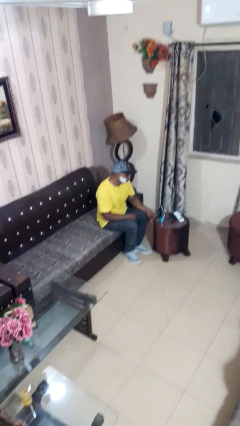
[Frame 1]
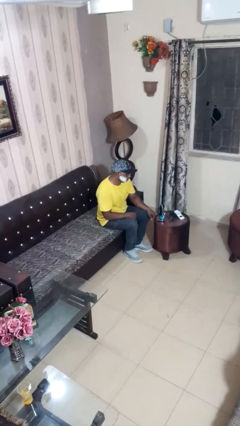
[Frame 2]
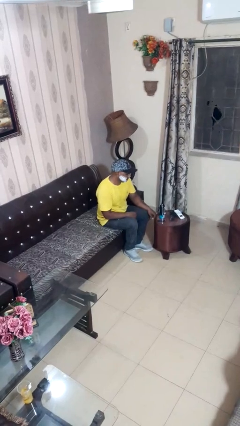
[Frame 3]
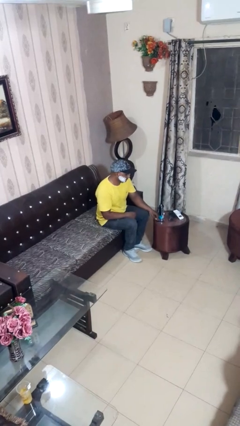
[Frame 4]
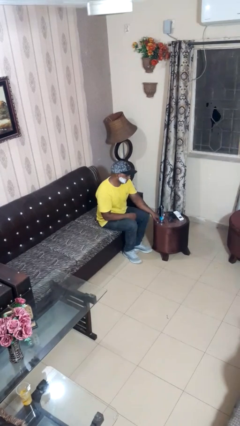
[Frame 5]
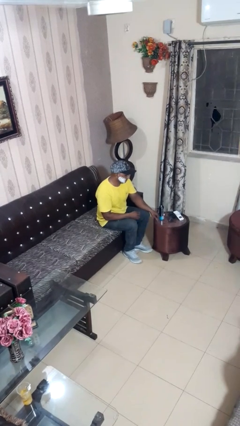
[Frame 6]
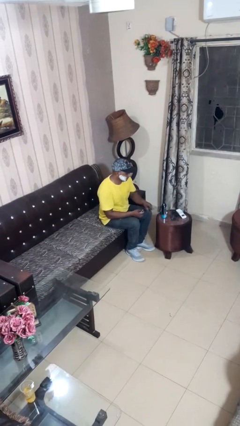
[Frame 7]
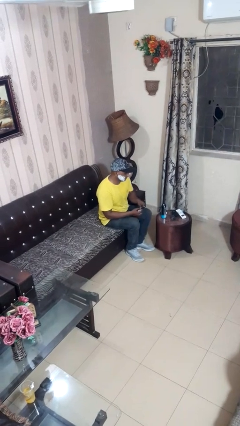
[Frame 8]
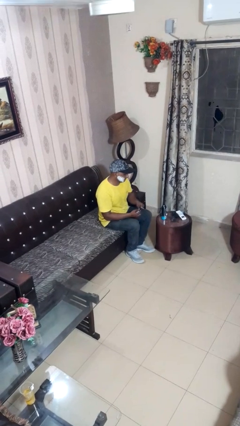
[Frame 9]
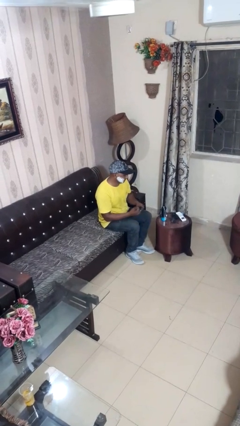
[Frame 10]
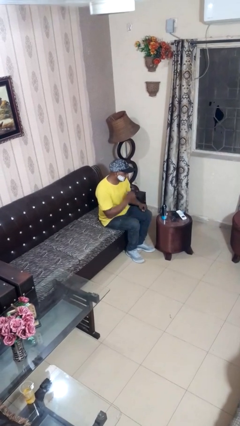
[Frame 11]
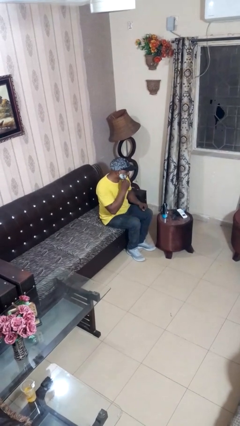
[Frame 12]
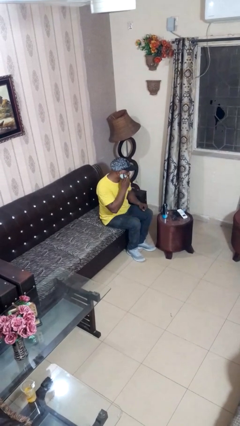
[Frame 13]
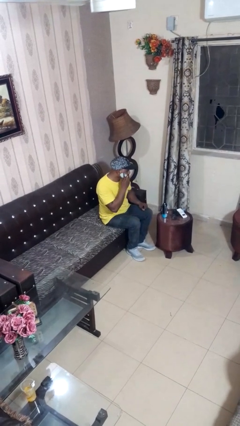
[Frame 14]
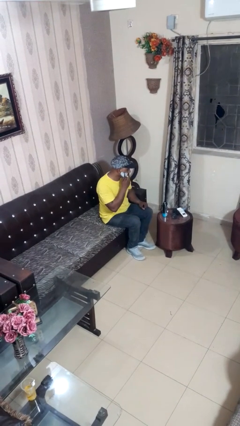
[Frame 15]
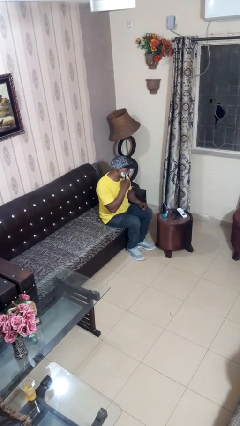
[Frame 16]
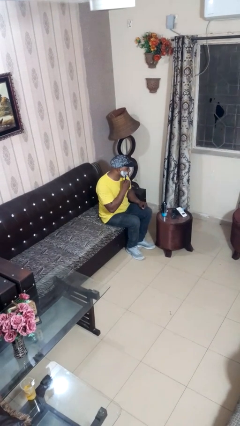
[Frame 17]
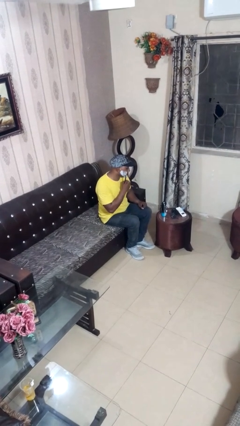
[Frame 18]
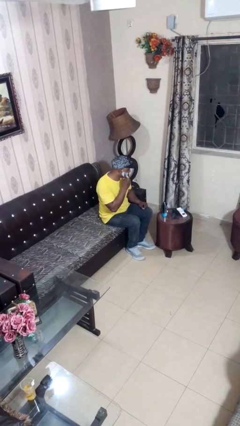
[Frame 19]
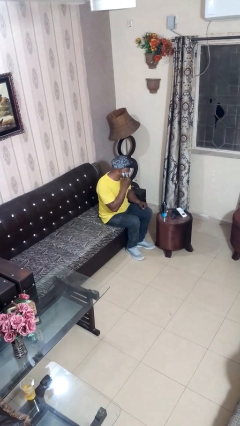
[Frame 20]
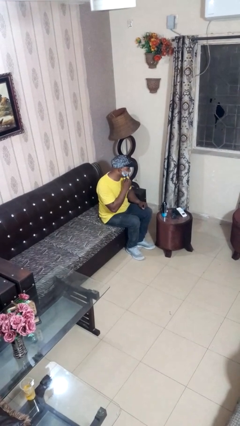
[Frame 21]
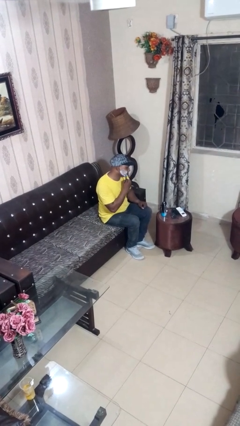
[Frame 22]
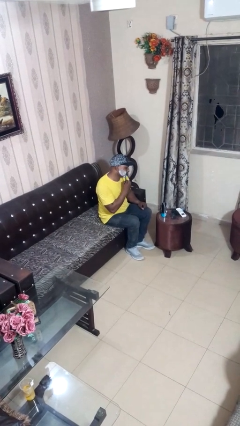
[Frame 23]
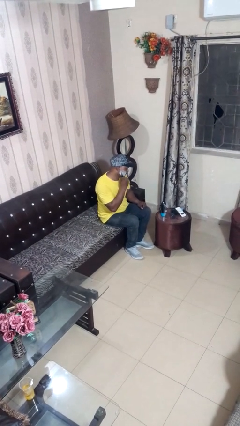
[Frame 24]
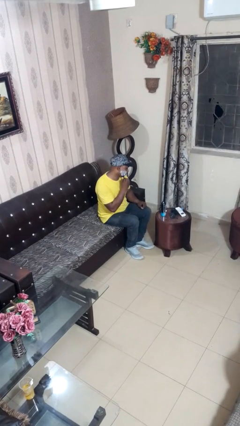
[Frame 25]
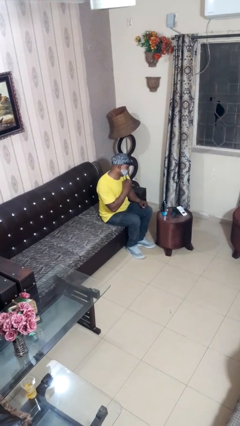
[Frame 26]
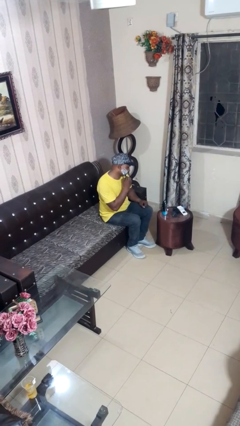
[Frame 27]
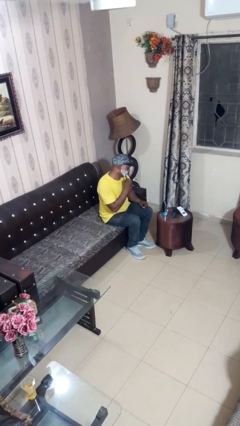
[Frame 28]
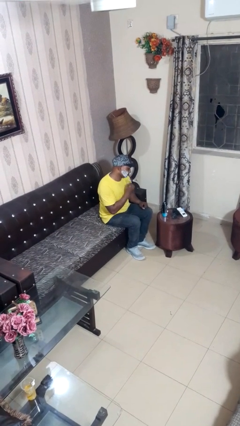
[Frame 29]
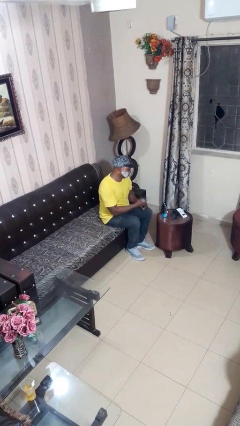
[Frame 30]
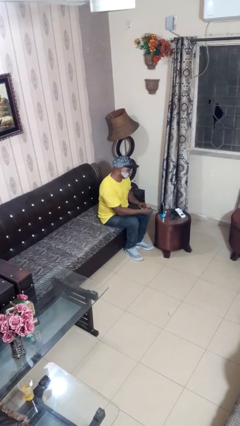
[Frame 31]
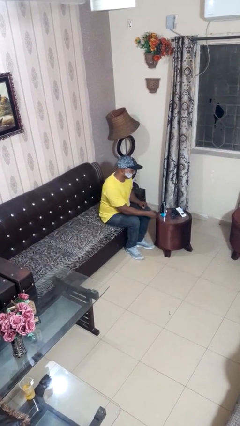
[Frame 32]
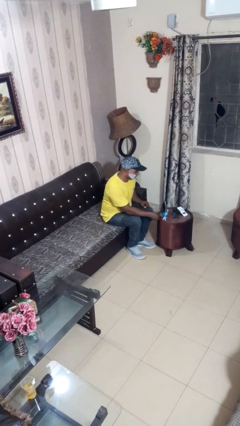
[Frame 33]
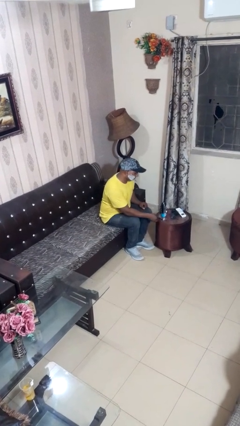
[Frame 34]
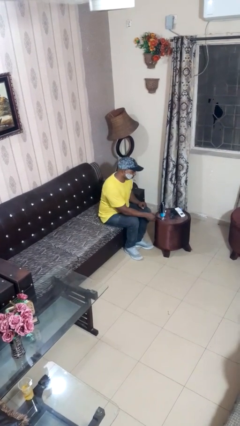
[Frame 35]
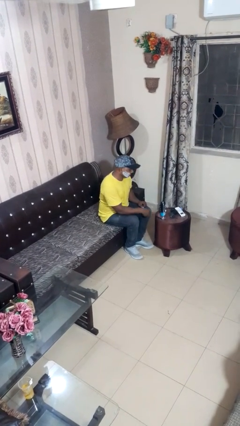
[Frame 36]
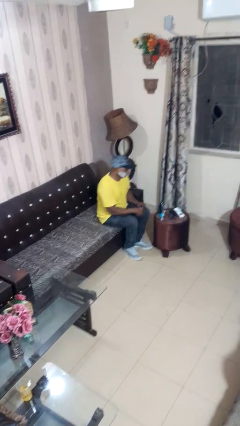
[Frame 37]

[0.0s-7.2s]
person shaves face

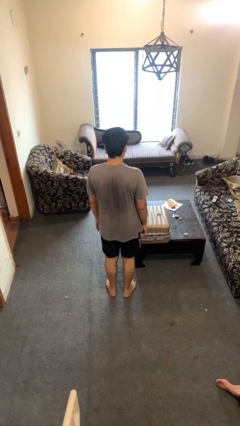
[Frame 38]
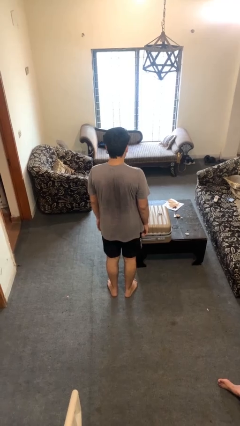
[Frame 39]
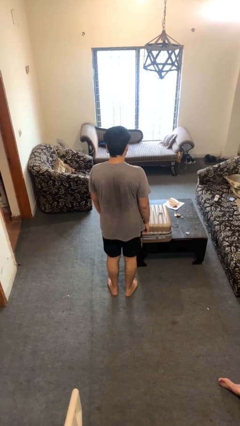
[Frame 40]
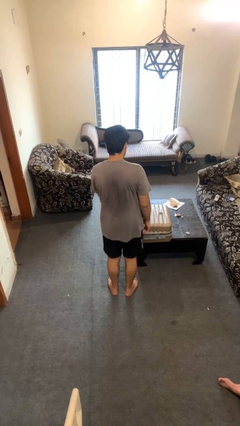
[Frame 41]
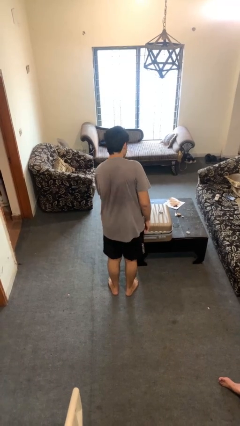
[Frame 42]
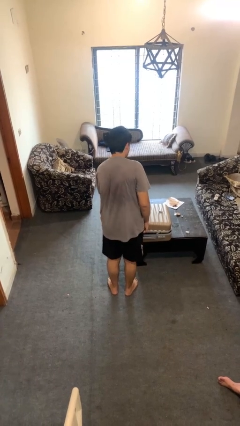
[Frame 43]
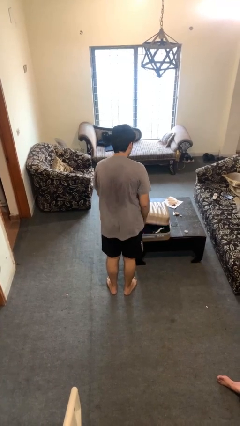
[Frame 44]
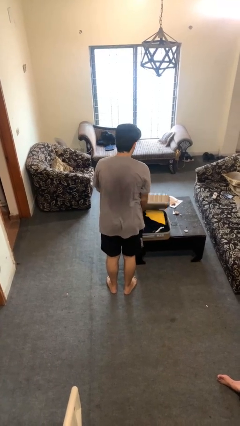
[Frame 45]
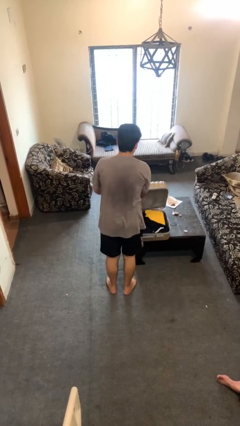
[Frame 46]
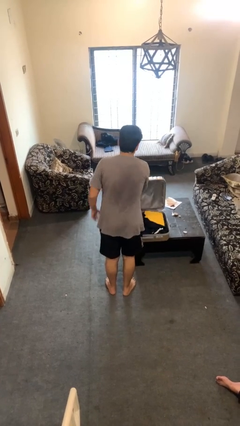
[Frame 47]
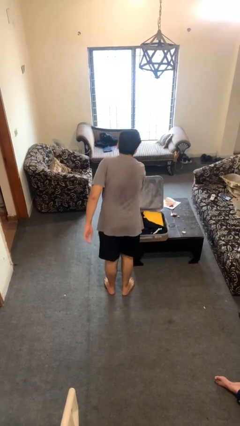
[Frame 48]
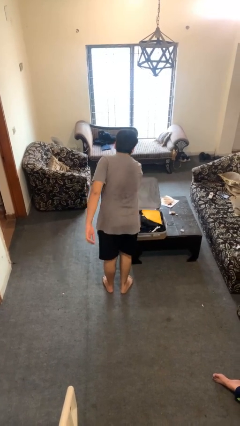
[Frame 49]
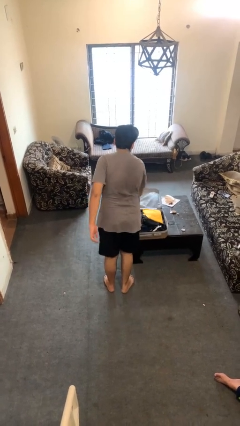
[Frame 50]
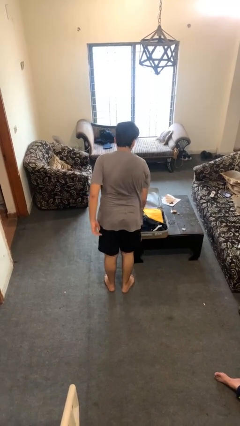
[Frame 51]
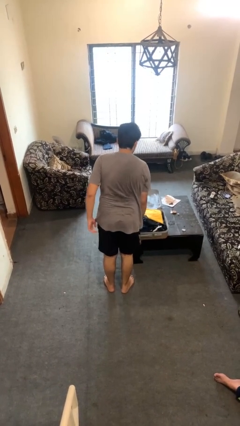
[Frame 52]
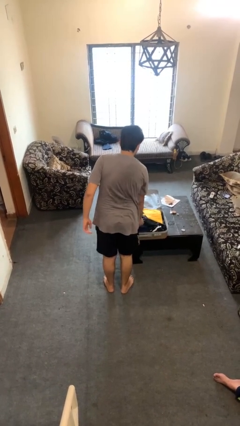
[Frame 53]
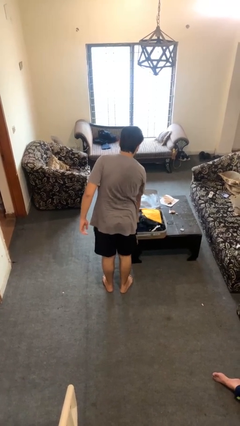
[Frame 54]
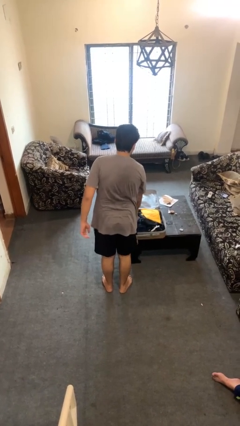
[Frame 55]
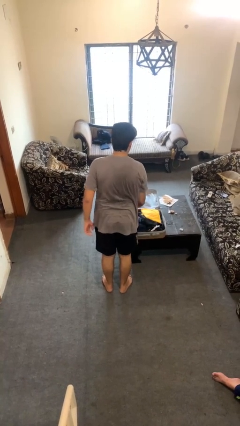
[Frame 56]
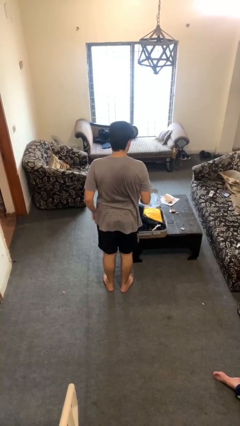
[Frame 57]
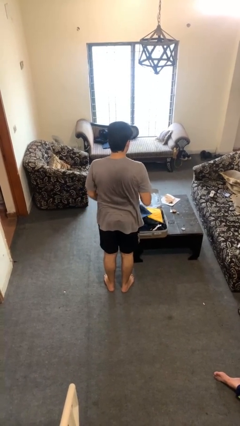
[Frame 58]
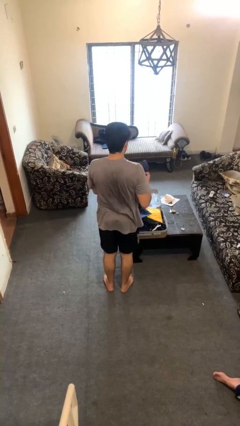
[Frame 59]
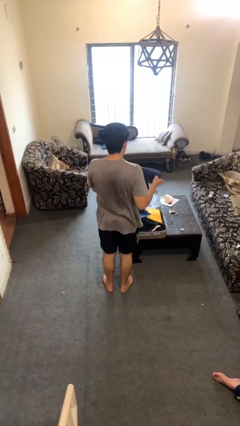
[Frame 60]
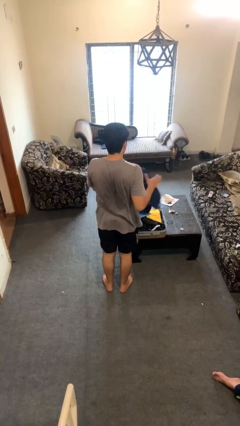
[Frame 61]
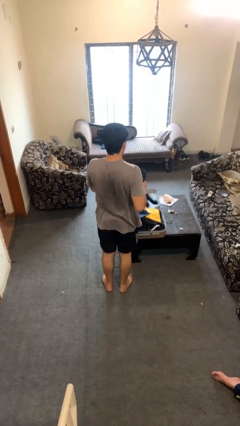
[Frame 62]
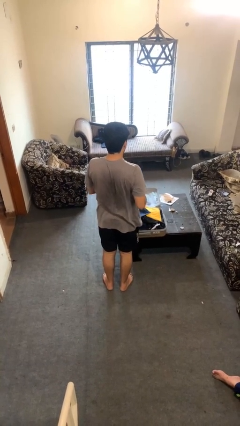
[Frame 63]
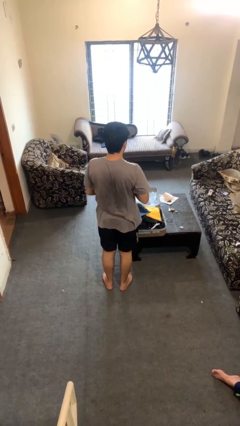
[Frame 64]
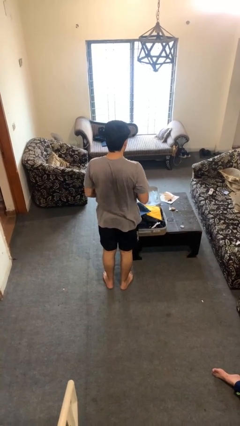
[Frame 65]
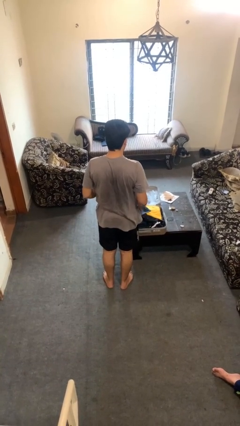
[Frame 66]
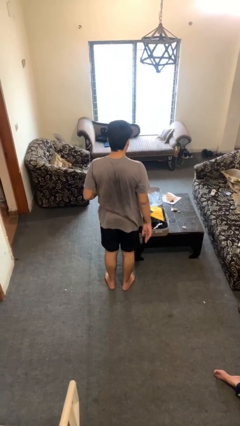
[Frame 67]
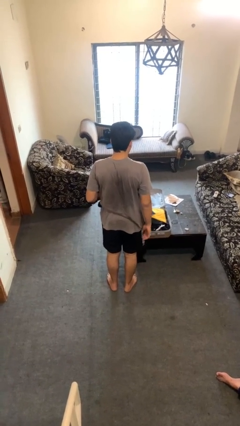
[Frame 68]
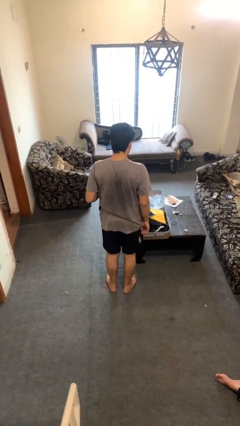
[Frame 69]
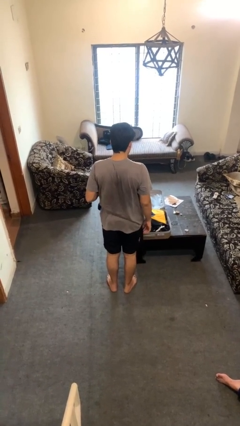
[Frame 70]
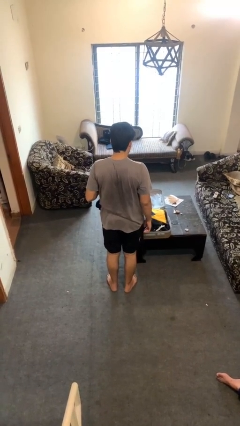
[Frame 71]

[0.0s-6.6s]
person unloads clothes from suitcase

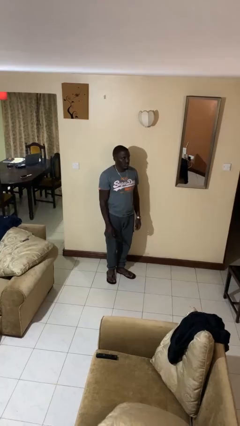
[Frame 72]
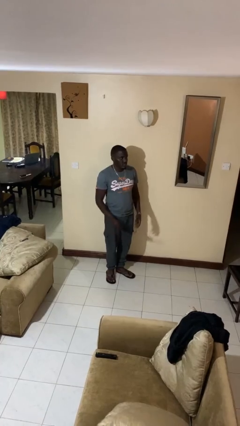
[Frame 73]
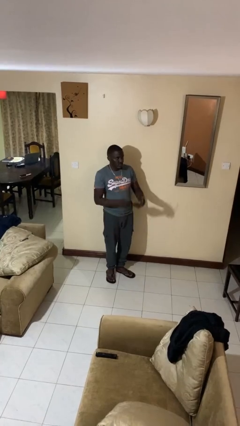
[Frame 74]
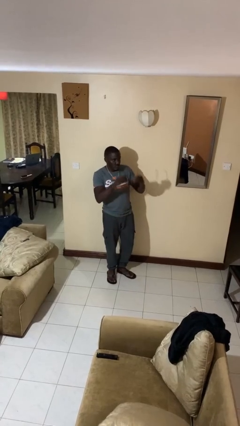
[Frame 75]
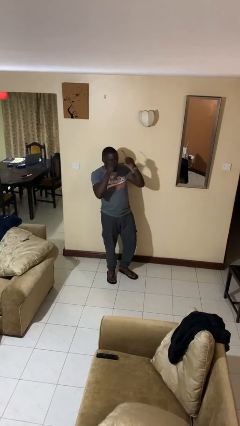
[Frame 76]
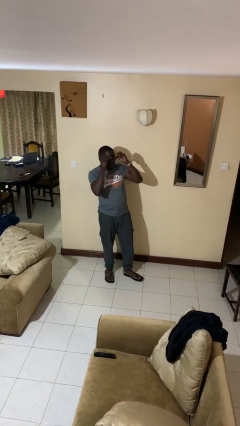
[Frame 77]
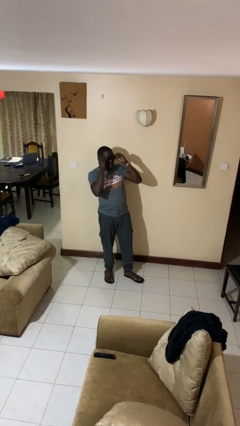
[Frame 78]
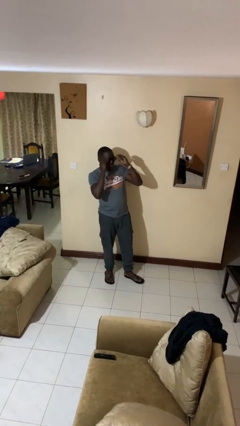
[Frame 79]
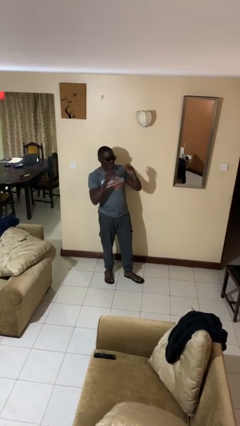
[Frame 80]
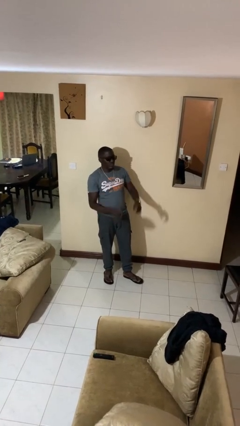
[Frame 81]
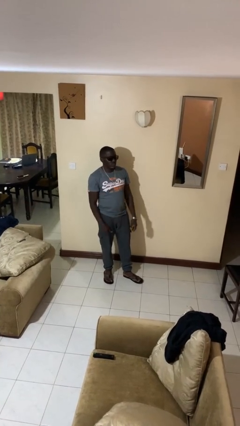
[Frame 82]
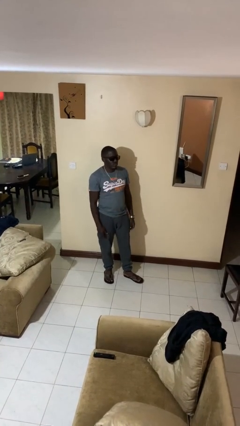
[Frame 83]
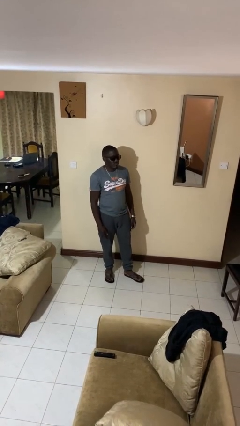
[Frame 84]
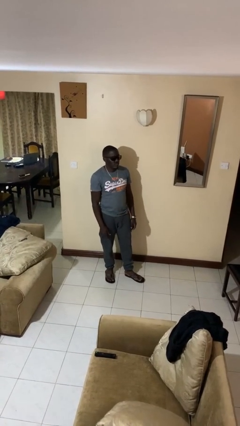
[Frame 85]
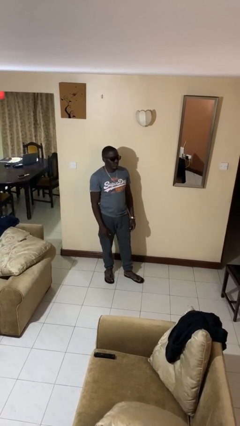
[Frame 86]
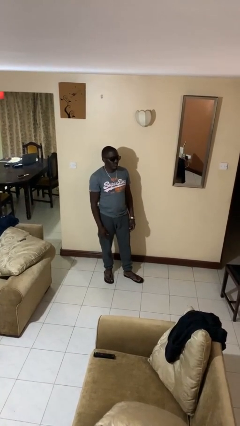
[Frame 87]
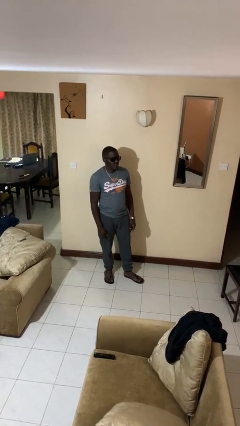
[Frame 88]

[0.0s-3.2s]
person puts on sunglasses

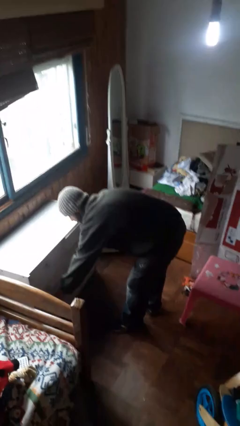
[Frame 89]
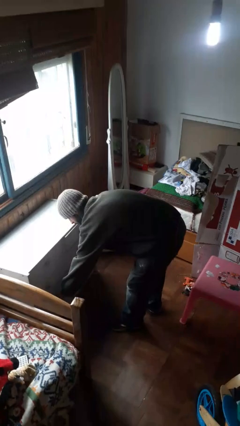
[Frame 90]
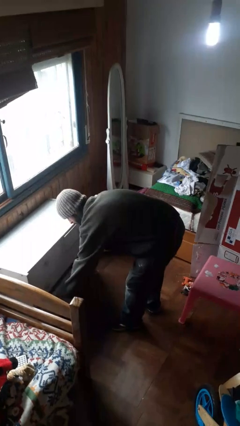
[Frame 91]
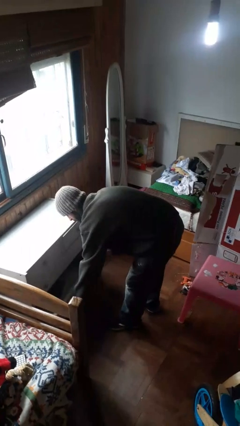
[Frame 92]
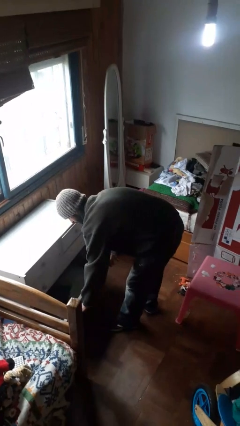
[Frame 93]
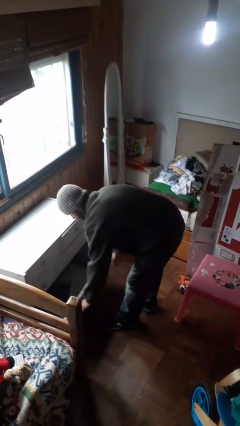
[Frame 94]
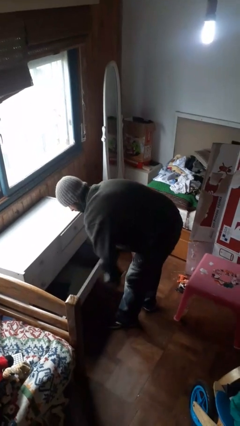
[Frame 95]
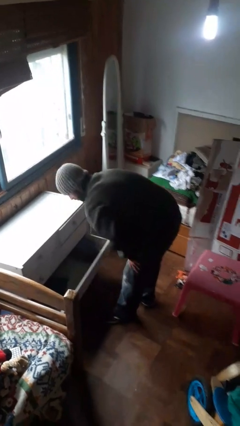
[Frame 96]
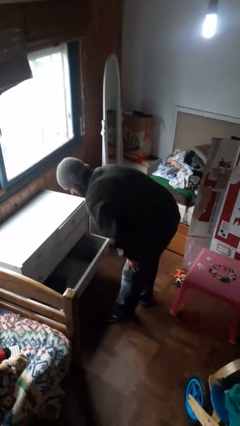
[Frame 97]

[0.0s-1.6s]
person opens dresser drawer
